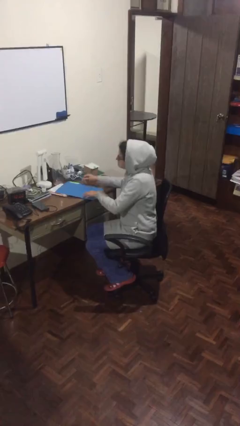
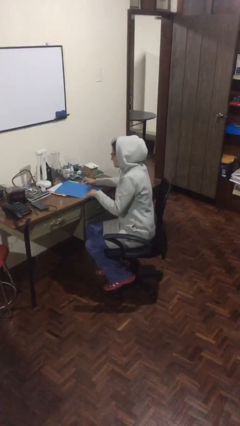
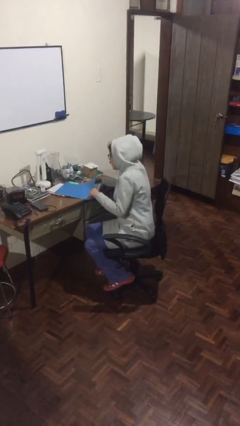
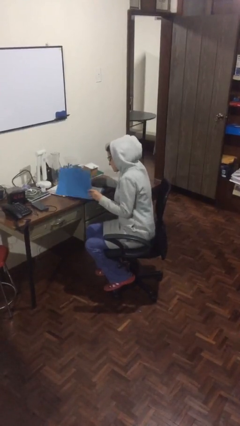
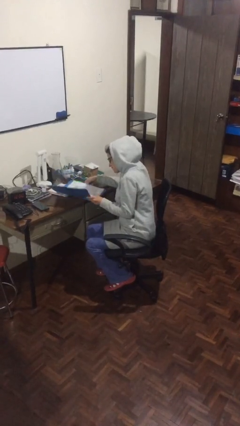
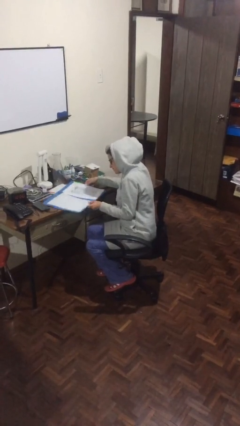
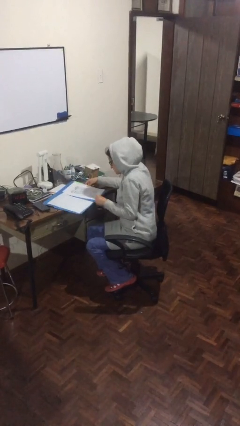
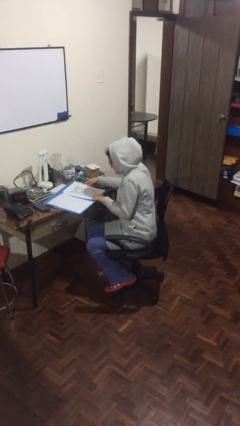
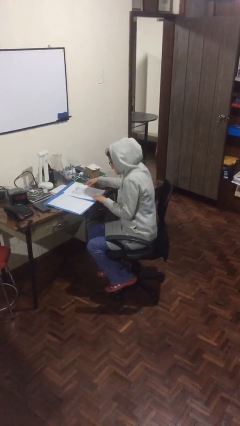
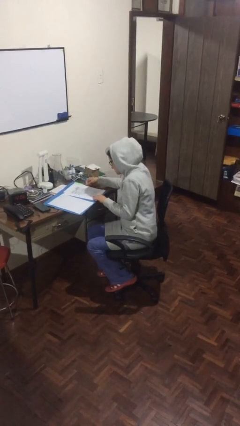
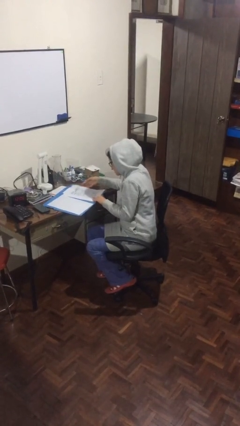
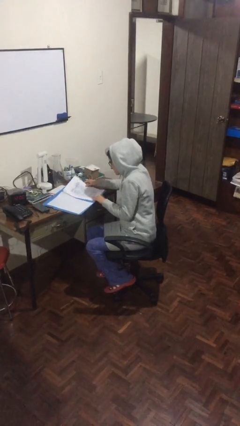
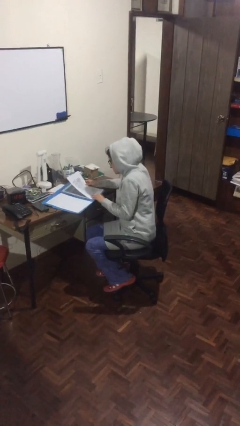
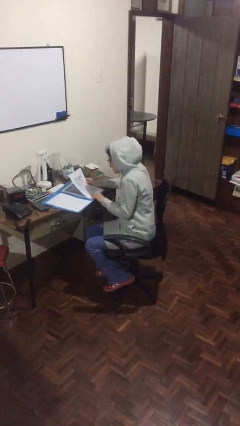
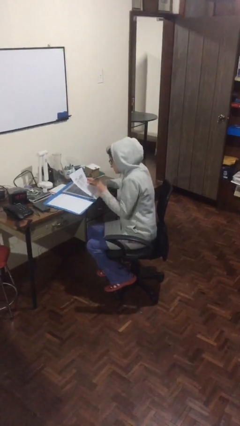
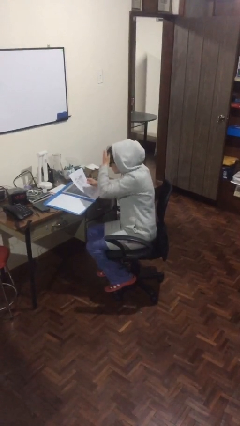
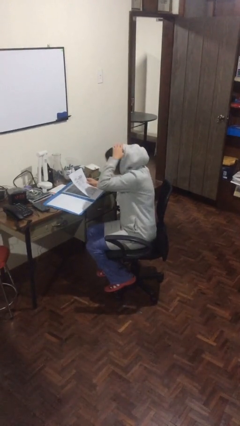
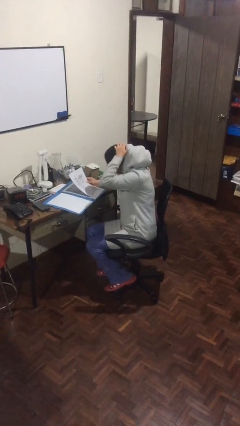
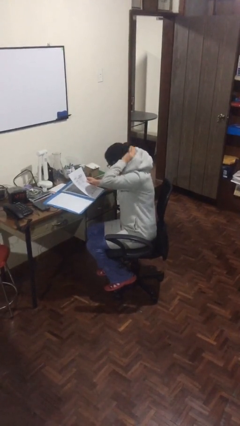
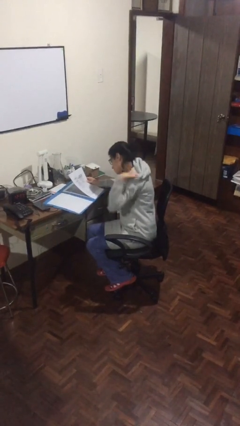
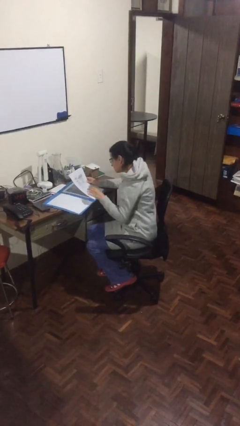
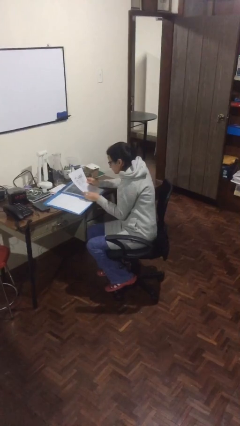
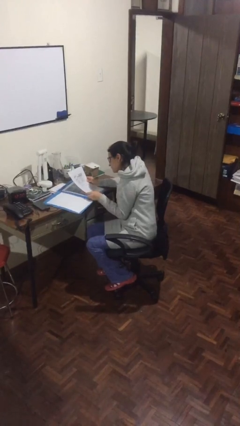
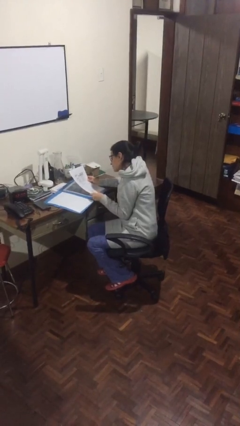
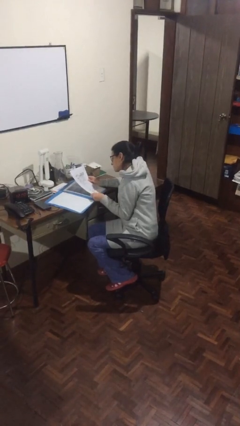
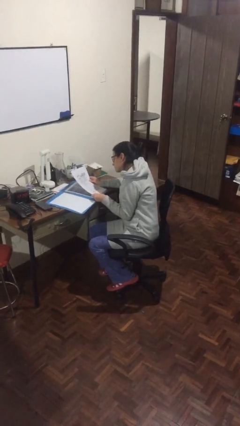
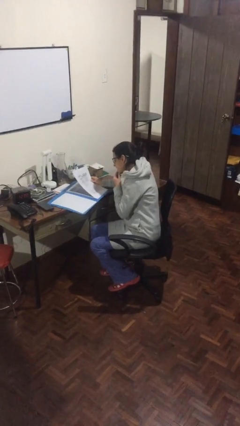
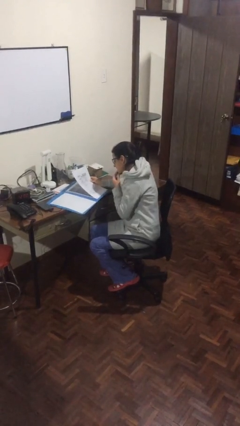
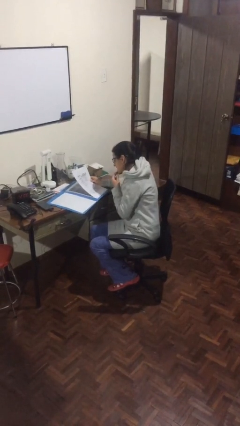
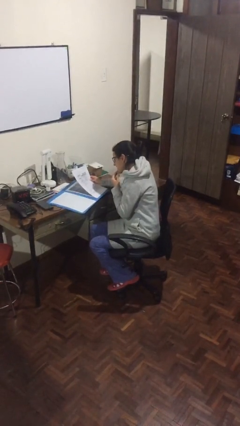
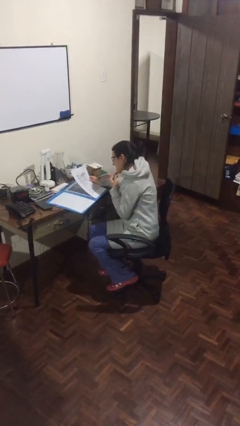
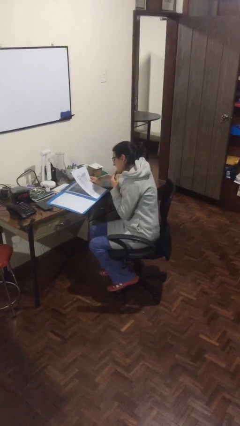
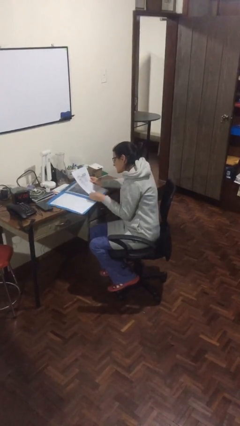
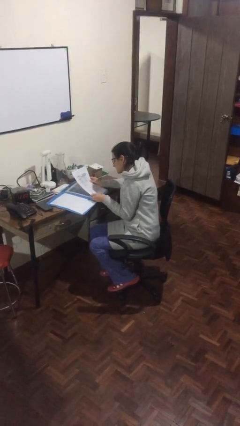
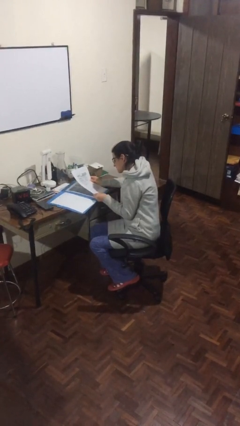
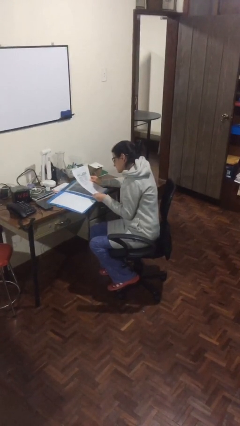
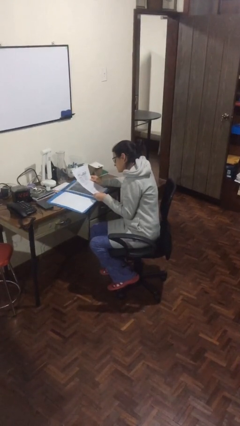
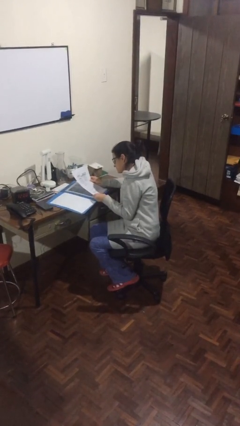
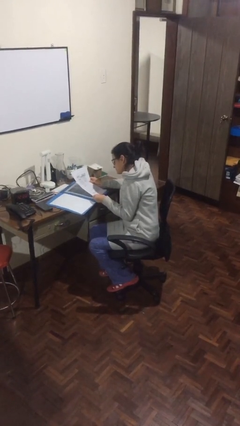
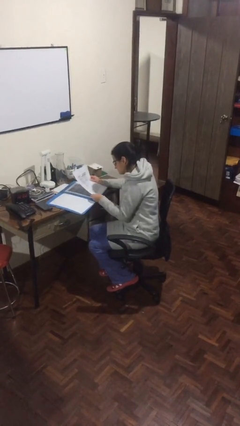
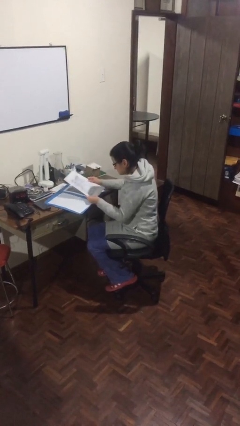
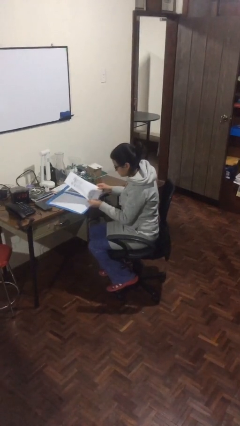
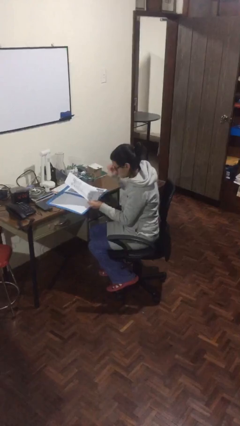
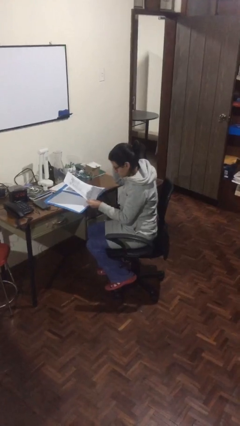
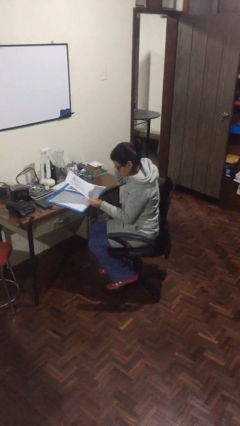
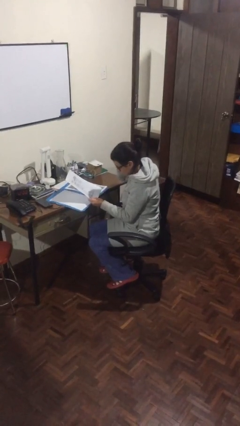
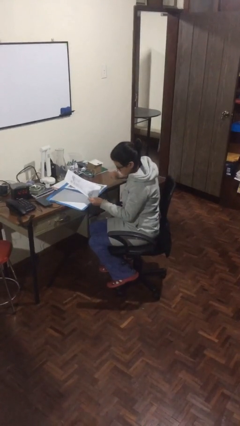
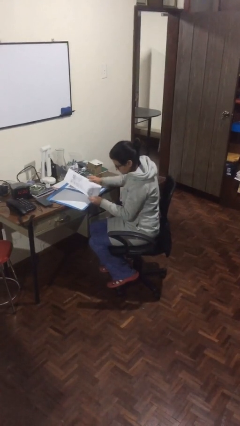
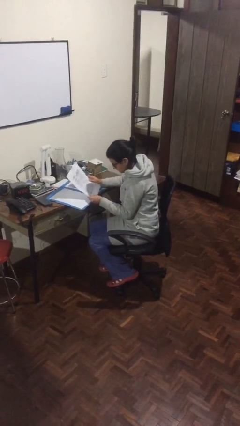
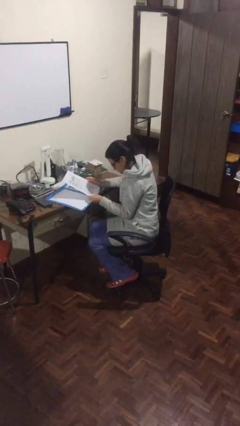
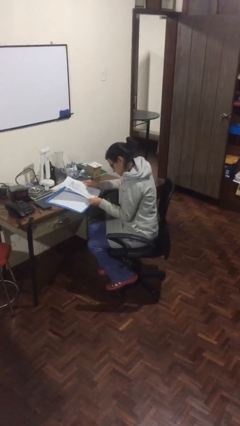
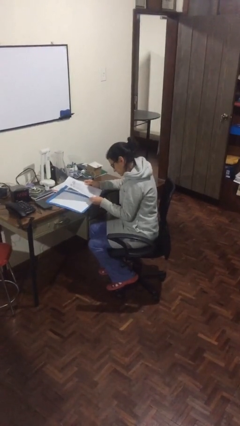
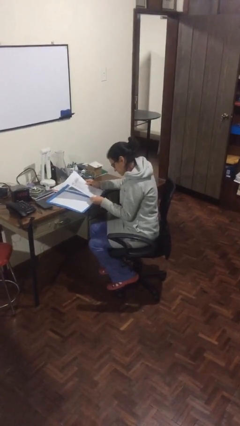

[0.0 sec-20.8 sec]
person reads document

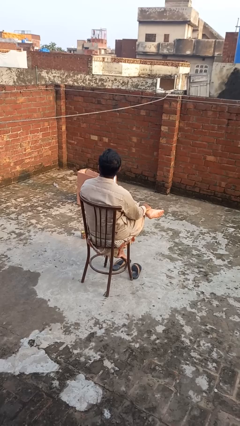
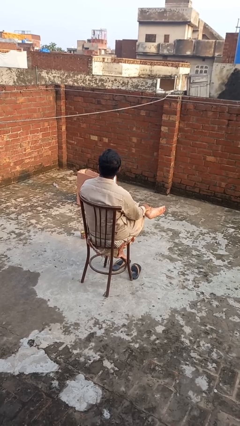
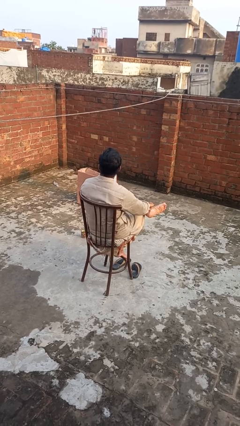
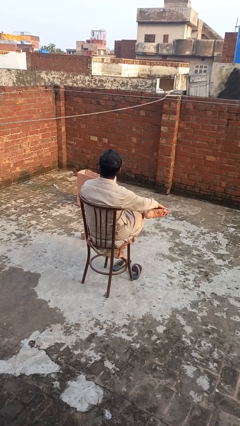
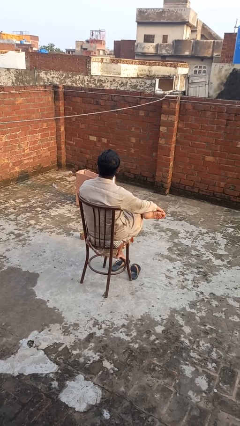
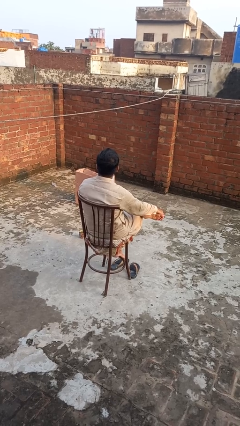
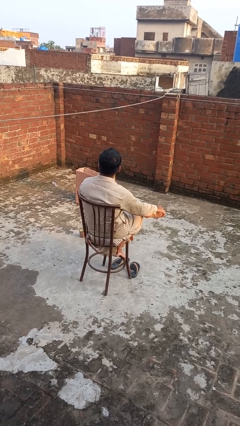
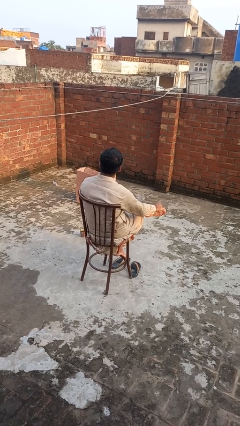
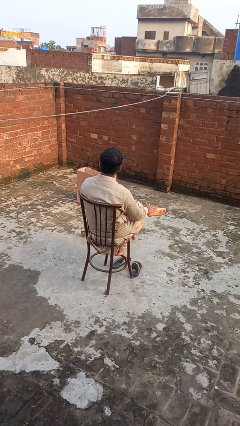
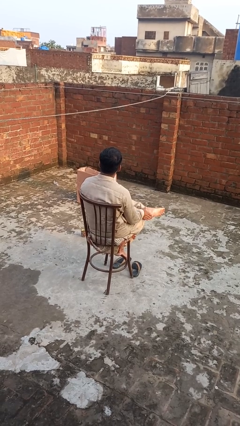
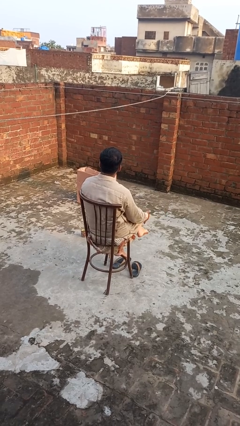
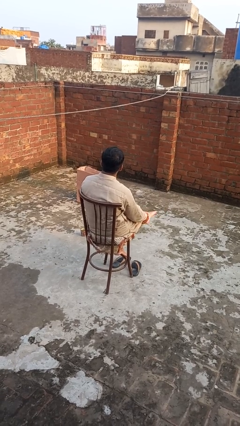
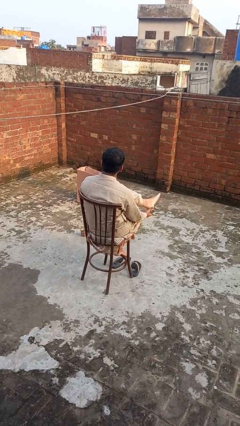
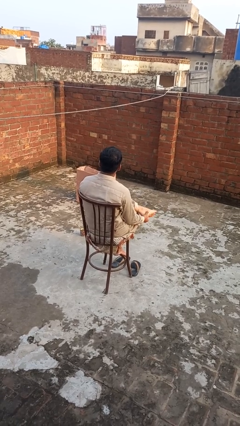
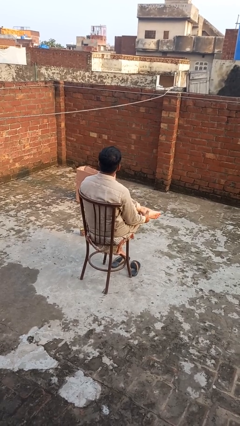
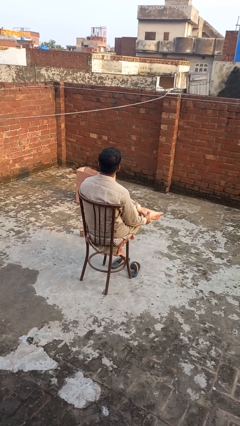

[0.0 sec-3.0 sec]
person rubs foot

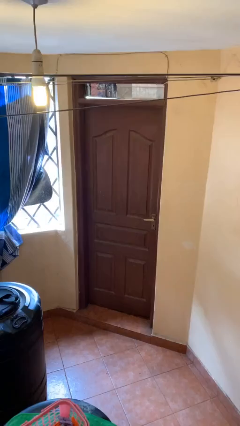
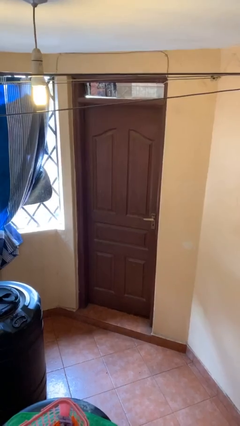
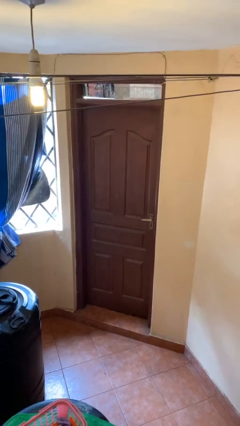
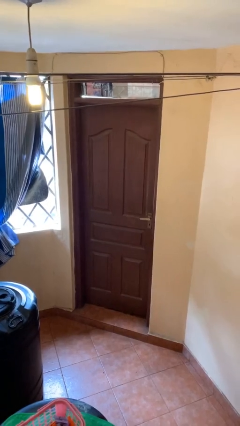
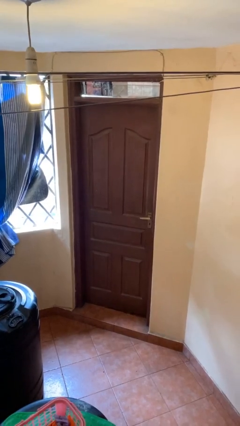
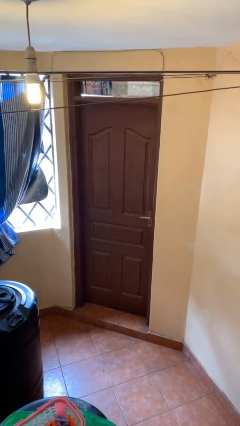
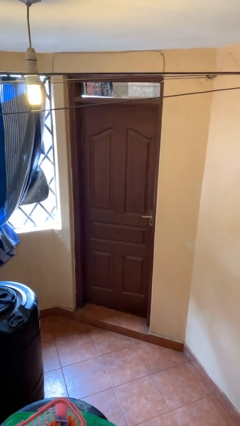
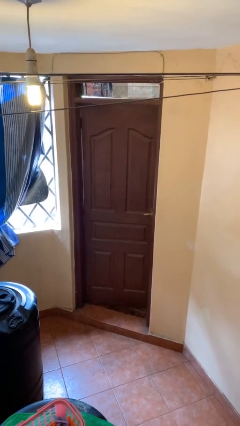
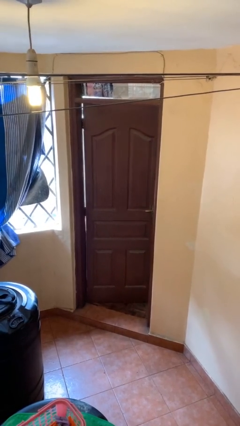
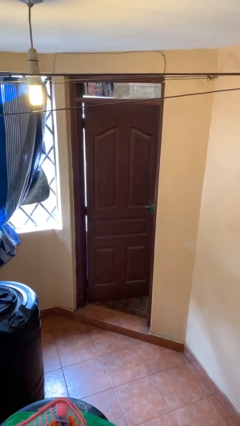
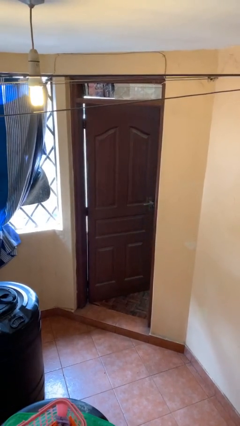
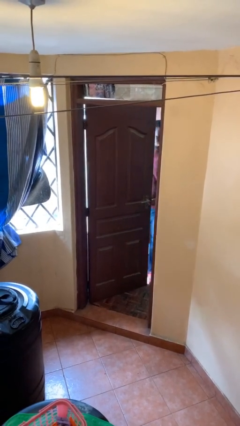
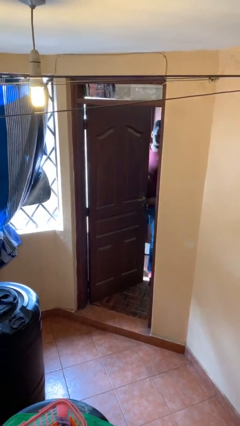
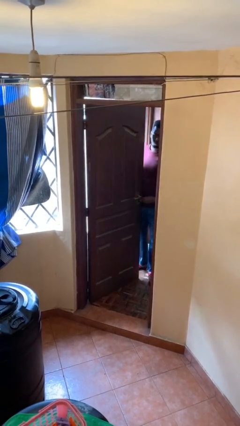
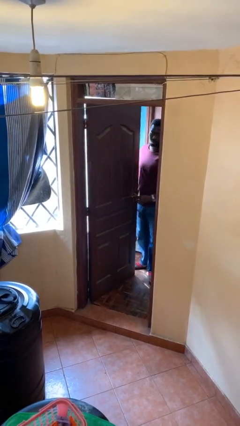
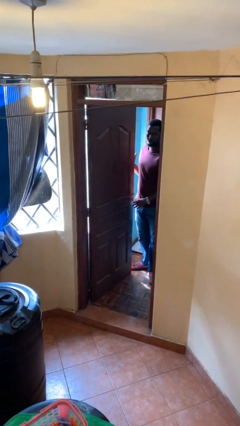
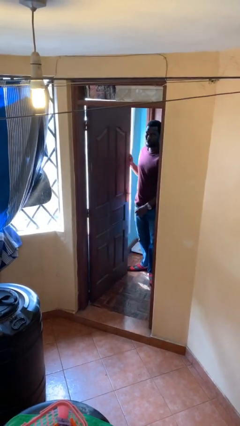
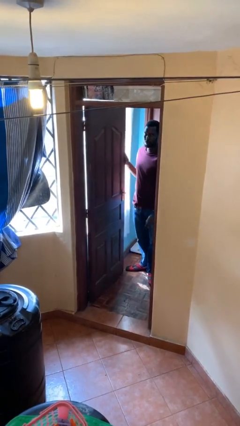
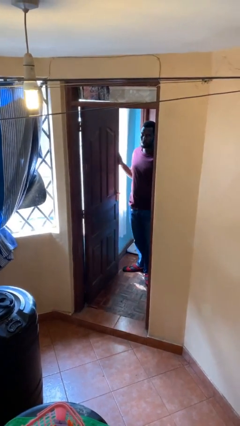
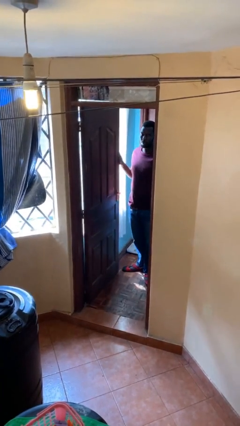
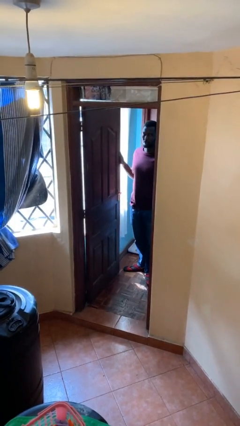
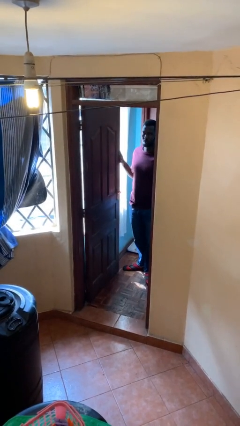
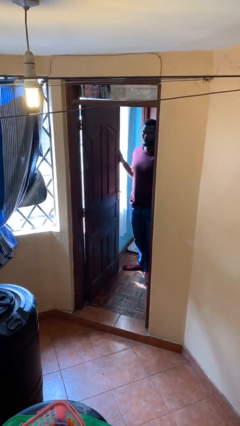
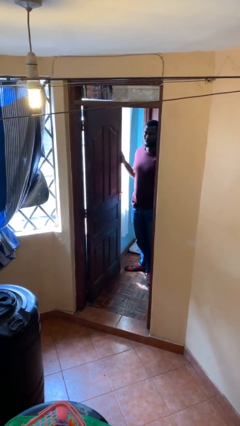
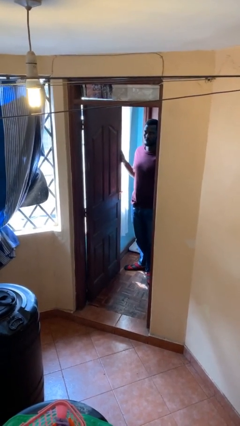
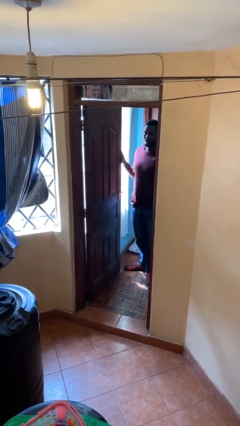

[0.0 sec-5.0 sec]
person opens facility door
